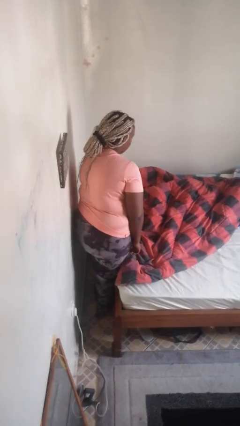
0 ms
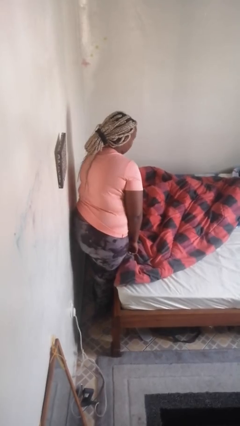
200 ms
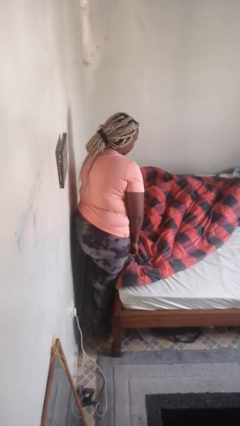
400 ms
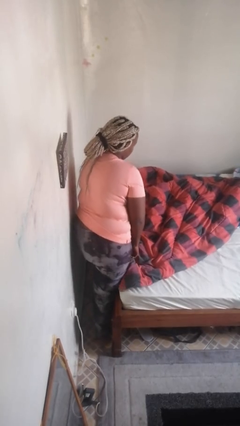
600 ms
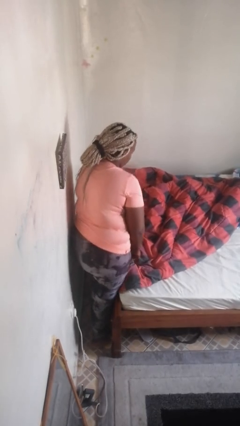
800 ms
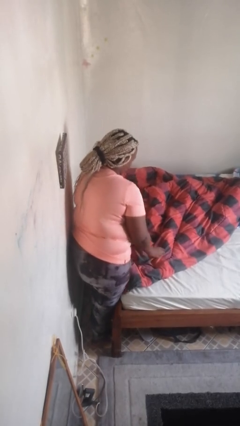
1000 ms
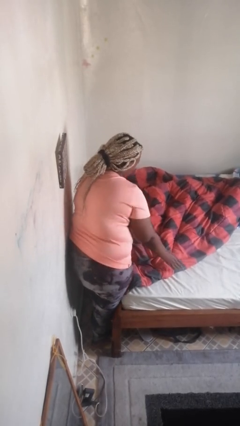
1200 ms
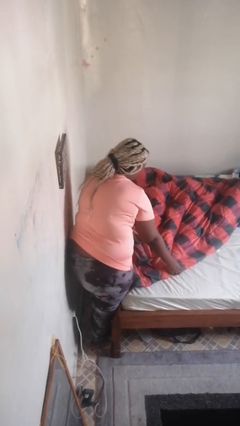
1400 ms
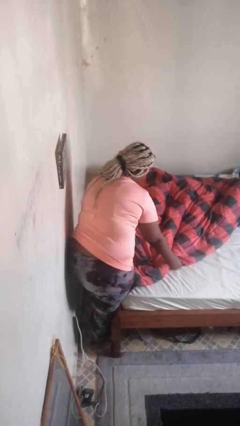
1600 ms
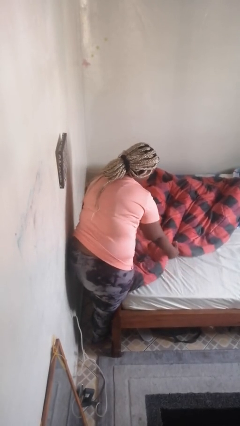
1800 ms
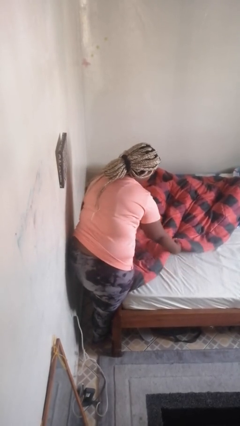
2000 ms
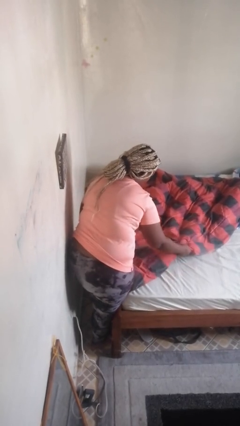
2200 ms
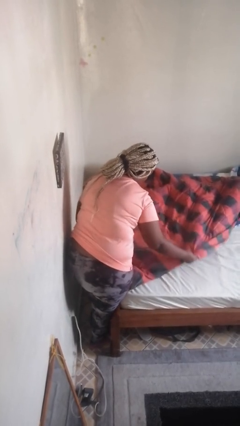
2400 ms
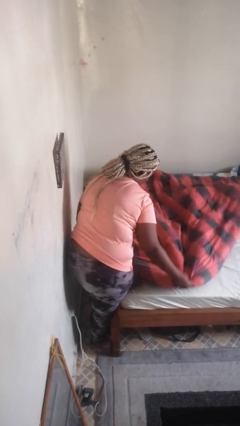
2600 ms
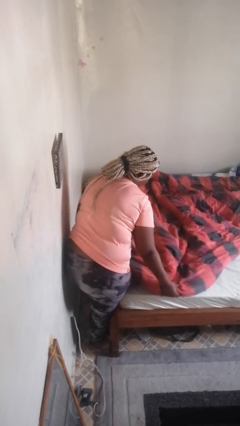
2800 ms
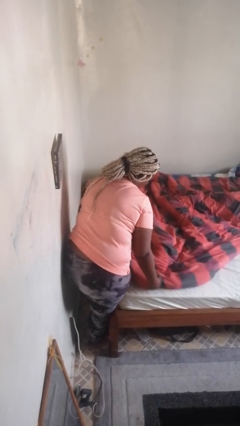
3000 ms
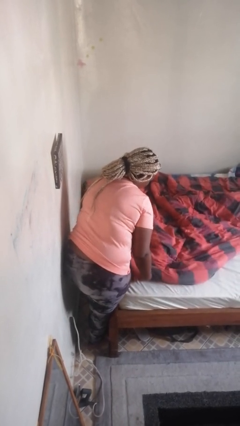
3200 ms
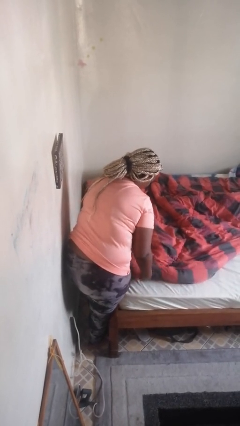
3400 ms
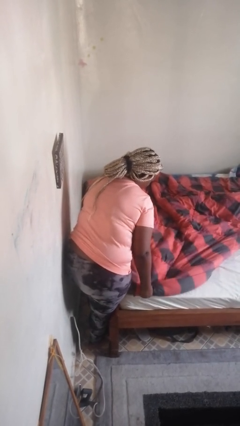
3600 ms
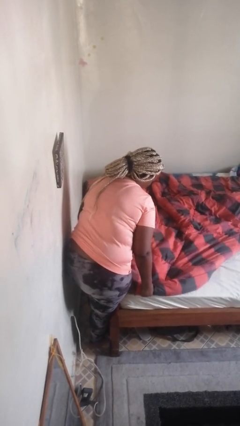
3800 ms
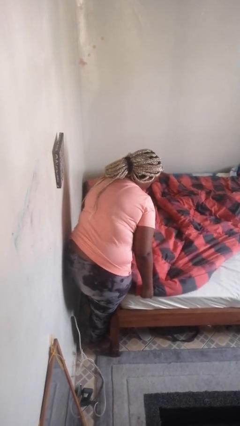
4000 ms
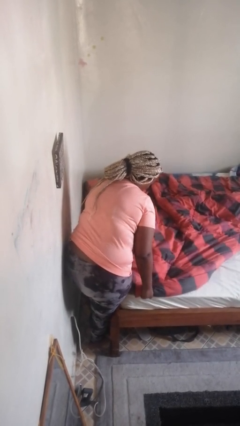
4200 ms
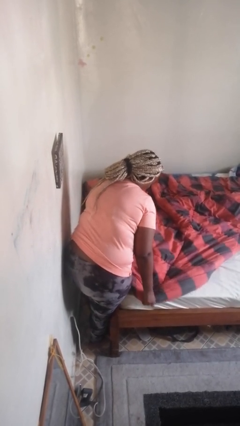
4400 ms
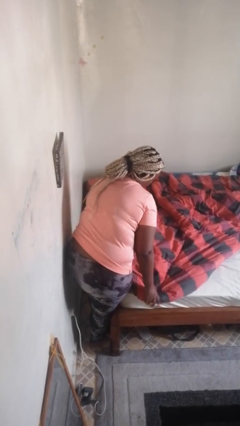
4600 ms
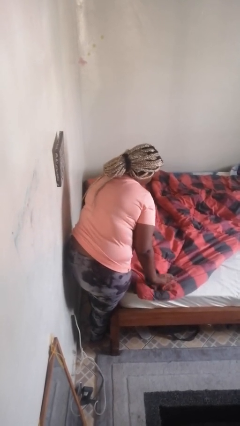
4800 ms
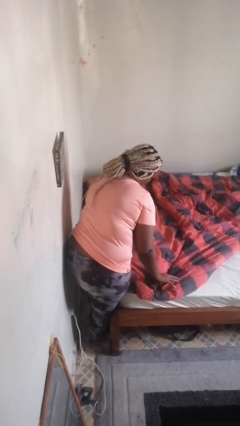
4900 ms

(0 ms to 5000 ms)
person makes bed

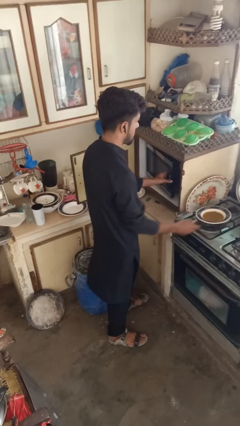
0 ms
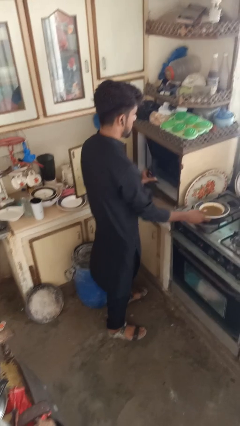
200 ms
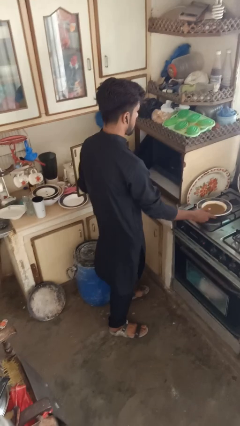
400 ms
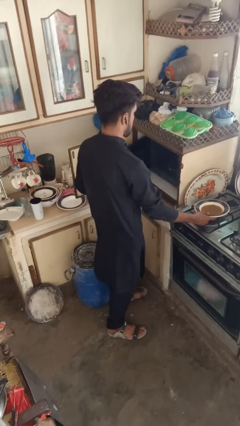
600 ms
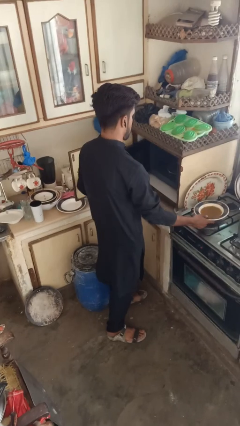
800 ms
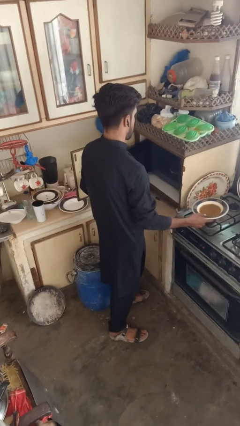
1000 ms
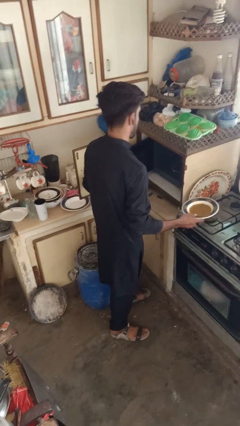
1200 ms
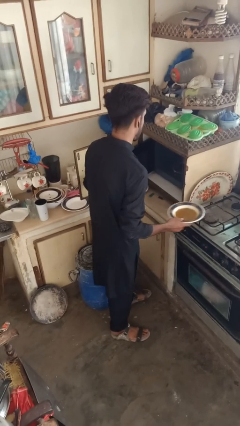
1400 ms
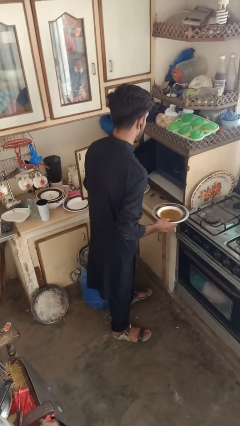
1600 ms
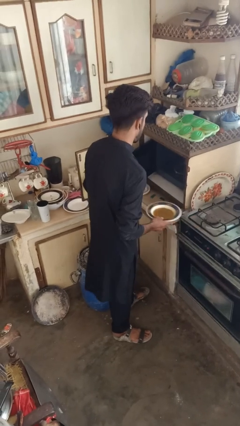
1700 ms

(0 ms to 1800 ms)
person opens microwave

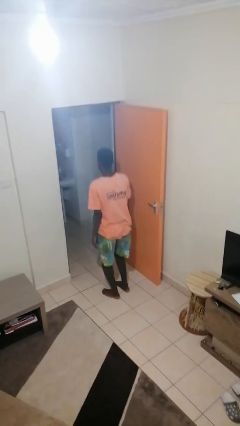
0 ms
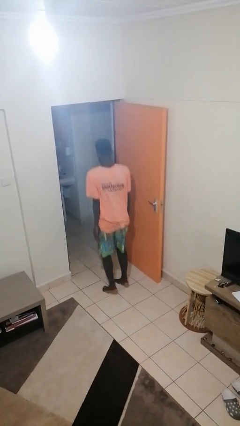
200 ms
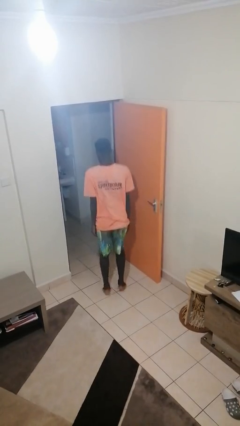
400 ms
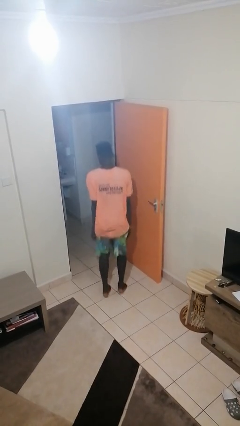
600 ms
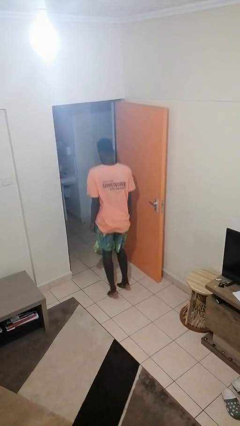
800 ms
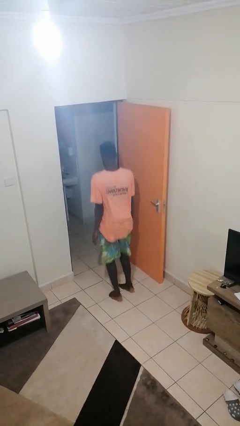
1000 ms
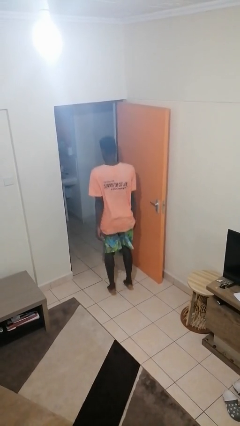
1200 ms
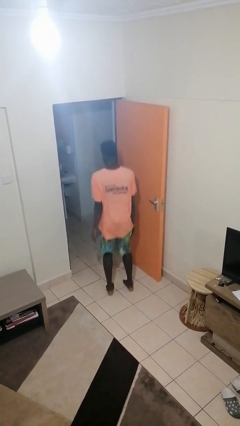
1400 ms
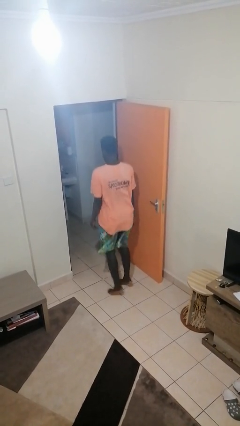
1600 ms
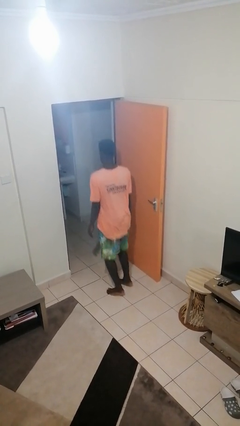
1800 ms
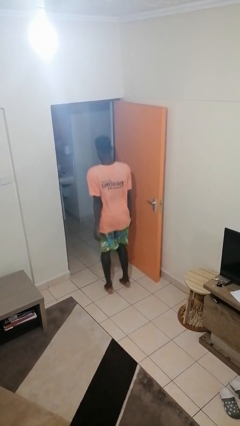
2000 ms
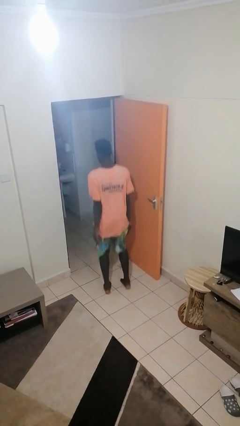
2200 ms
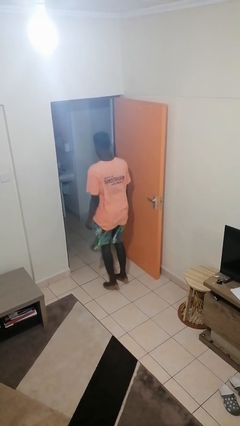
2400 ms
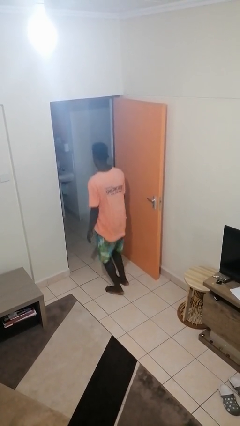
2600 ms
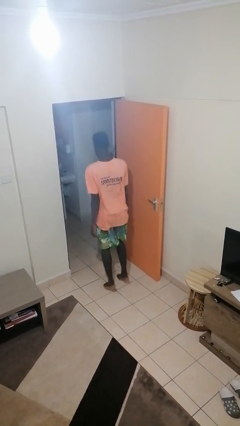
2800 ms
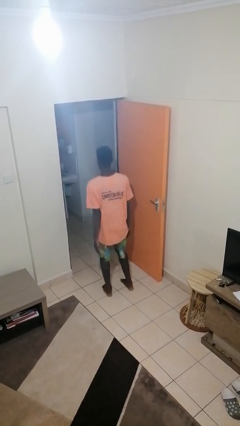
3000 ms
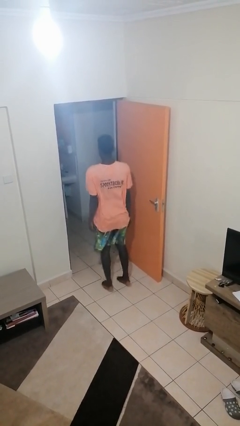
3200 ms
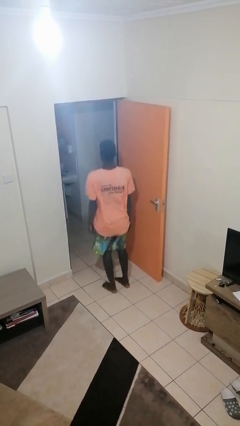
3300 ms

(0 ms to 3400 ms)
person jumps

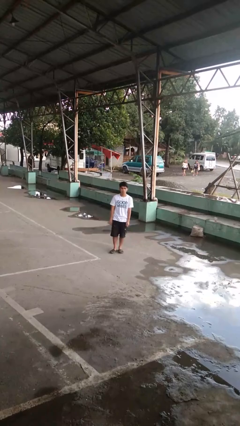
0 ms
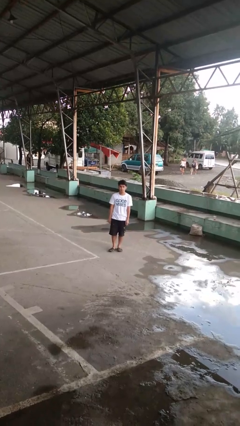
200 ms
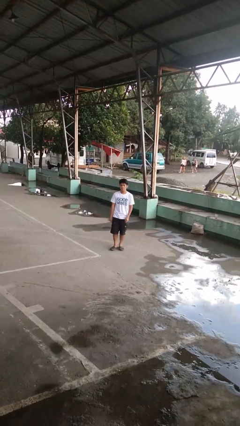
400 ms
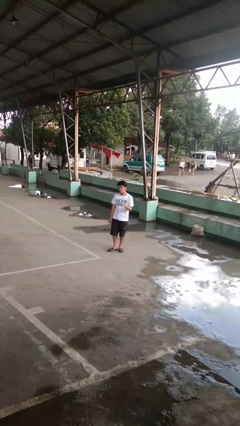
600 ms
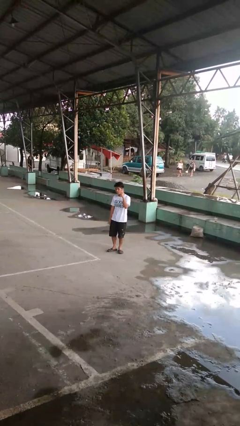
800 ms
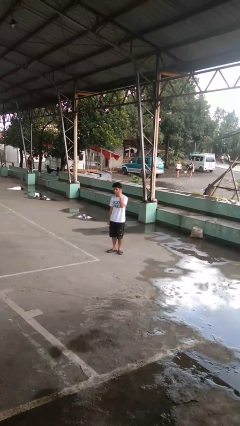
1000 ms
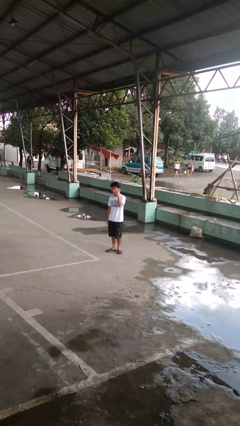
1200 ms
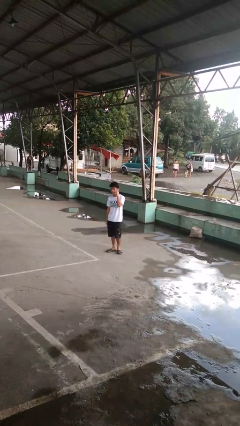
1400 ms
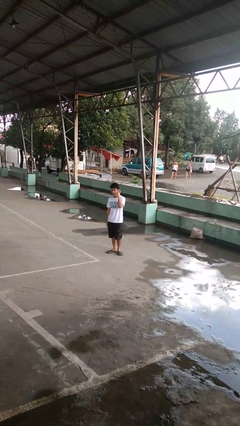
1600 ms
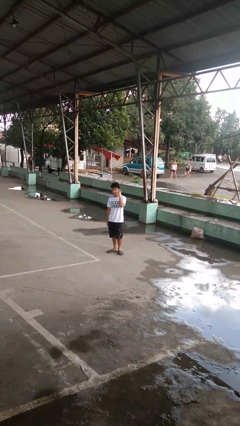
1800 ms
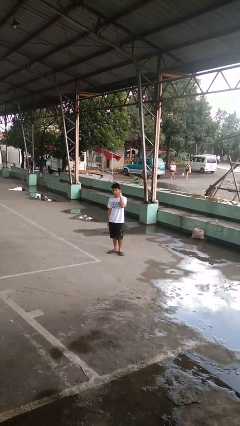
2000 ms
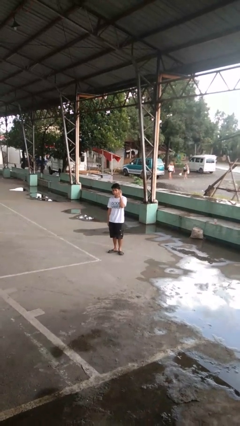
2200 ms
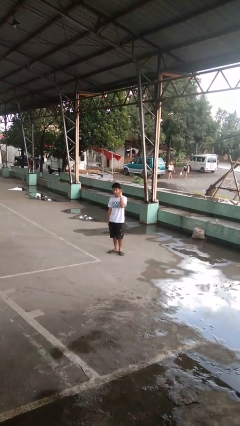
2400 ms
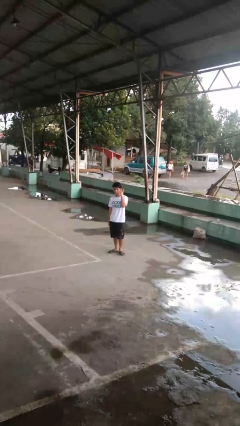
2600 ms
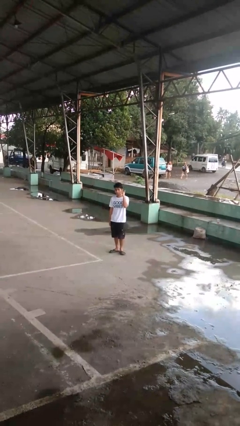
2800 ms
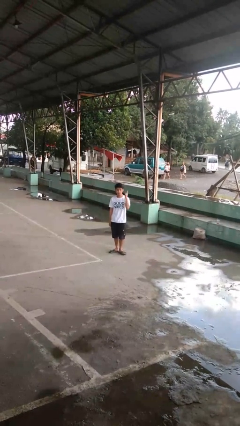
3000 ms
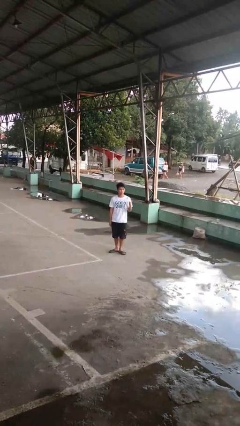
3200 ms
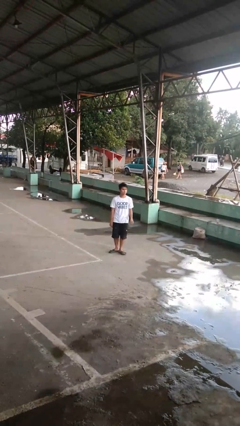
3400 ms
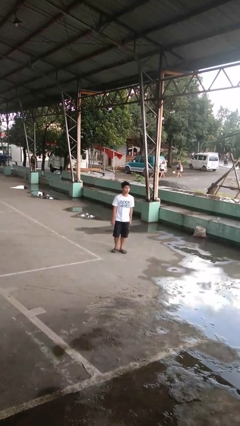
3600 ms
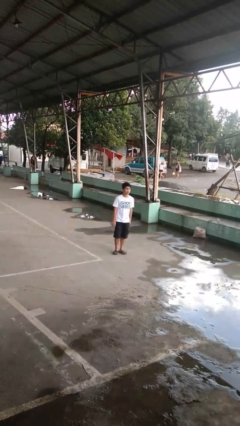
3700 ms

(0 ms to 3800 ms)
person gestures listen closely

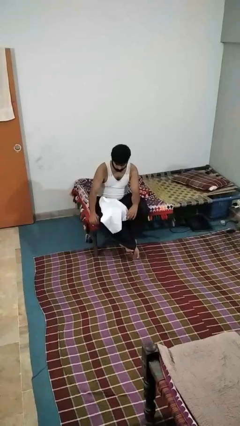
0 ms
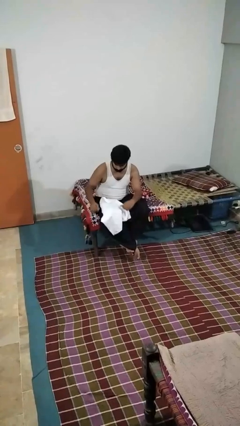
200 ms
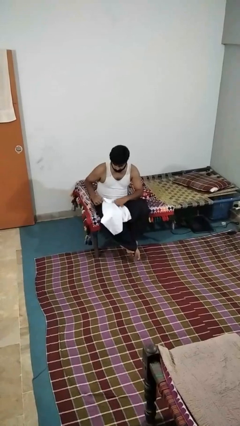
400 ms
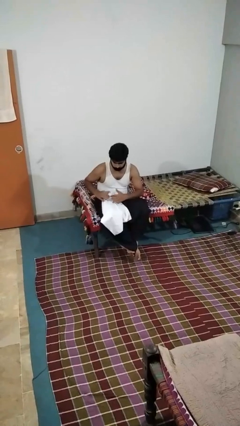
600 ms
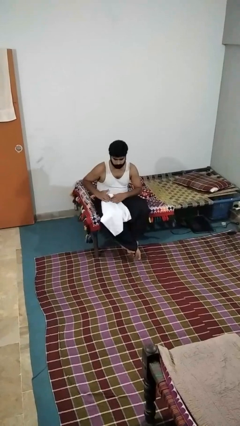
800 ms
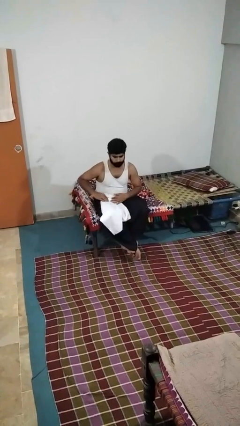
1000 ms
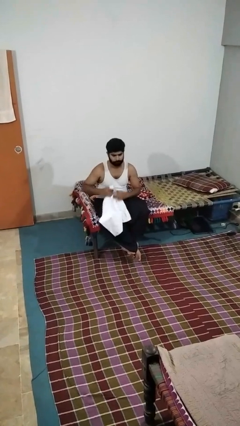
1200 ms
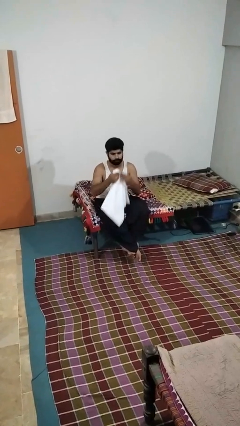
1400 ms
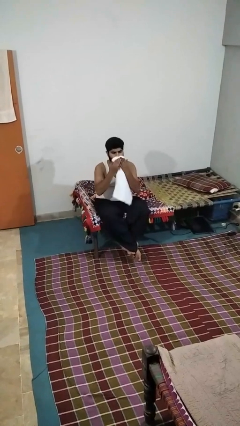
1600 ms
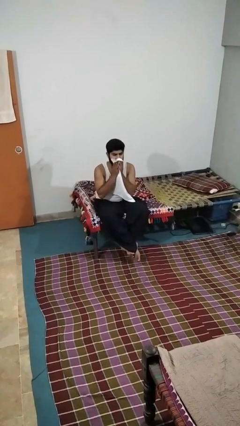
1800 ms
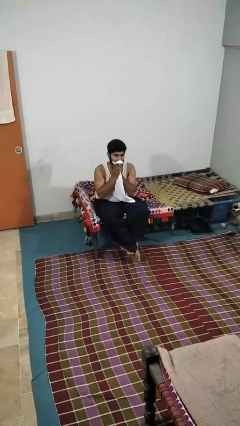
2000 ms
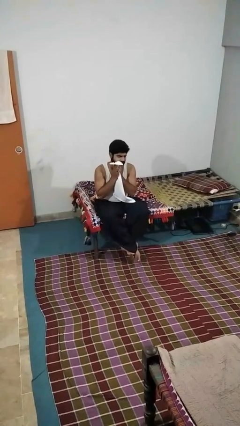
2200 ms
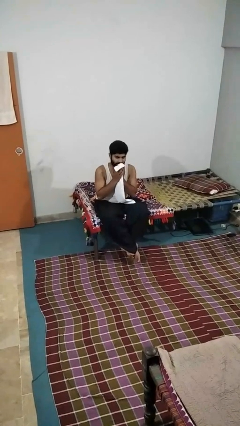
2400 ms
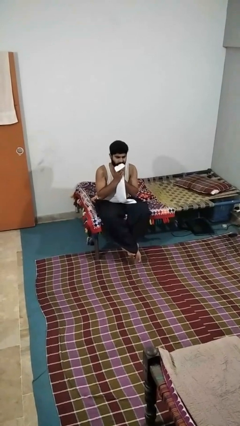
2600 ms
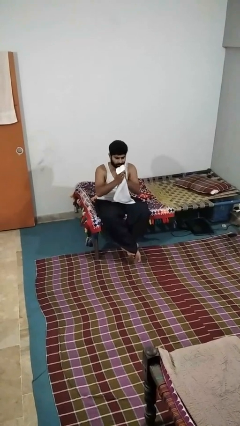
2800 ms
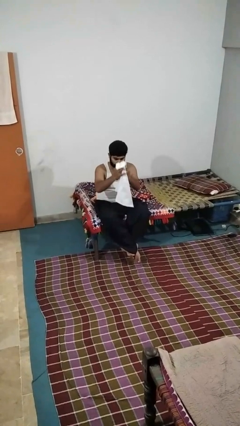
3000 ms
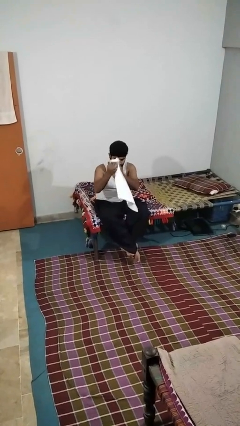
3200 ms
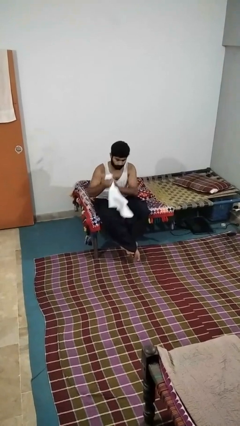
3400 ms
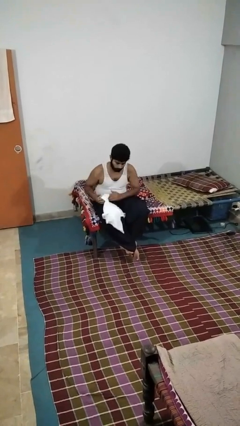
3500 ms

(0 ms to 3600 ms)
person wipes mouth with napkin

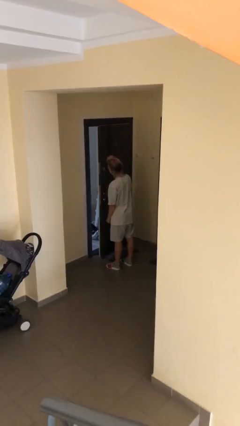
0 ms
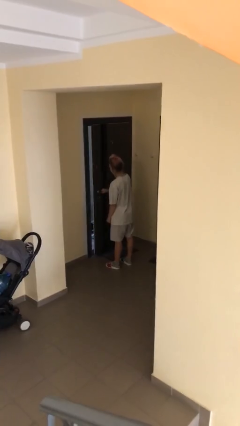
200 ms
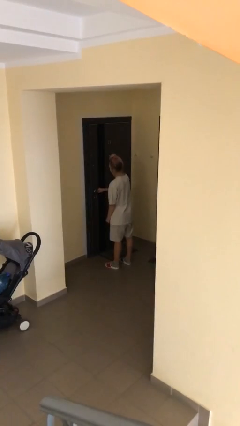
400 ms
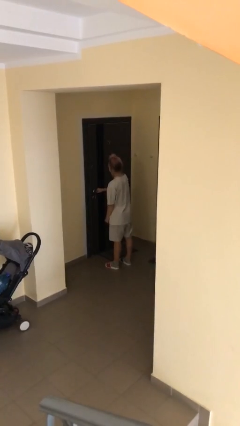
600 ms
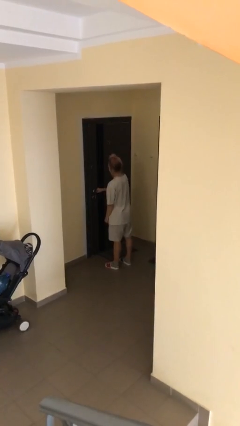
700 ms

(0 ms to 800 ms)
person closes facility door
